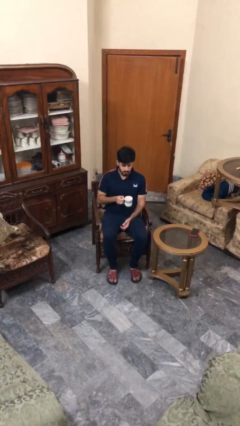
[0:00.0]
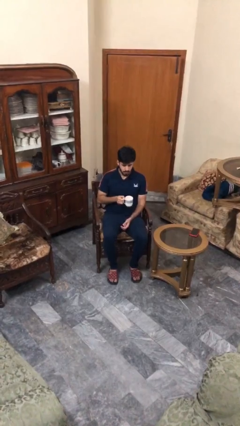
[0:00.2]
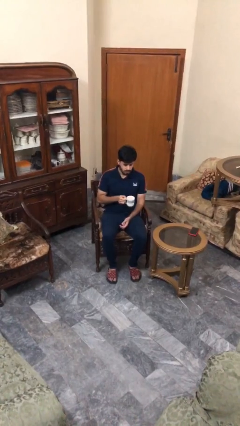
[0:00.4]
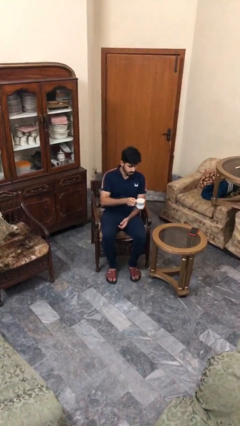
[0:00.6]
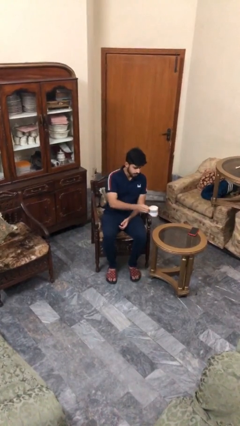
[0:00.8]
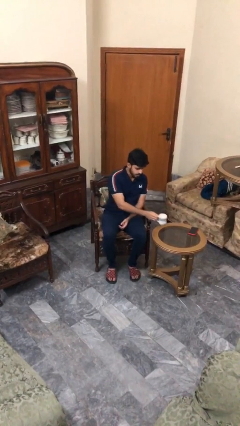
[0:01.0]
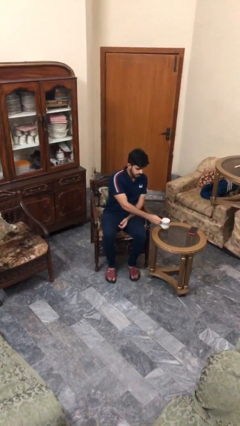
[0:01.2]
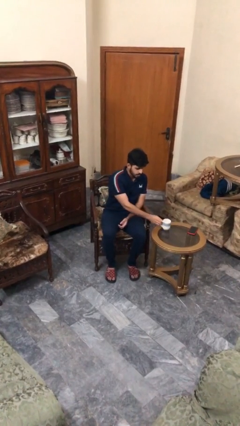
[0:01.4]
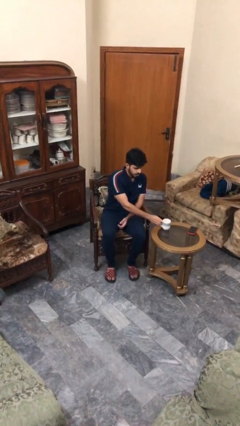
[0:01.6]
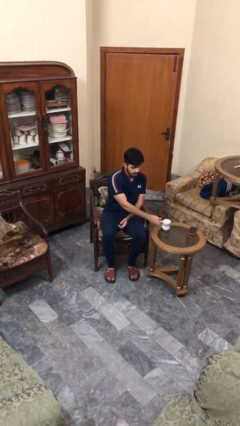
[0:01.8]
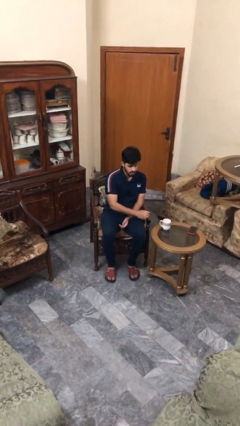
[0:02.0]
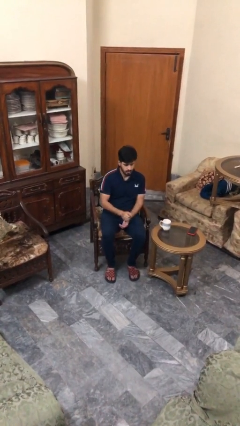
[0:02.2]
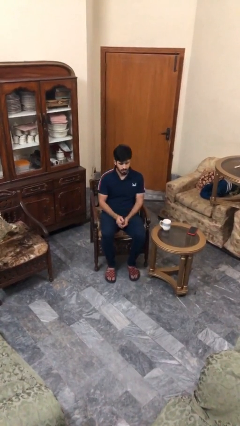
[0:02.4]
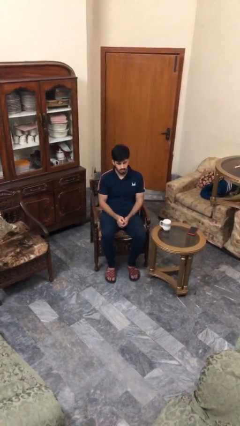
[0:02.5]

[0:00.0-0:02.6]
person puts down object on table

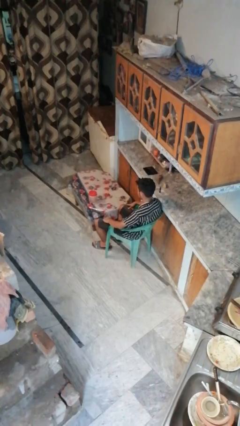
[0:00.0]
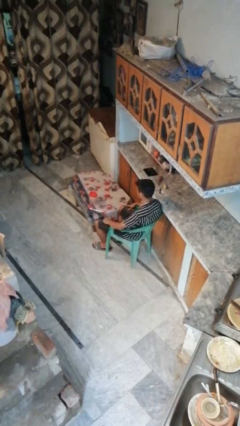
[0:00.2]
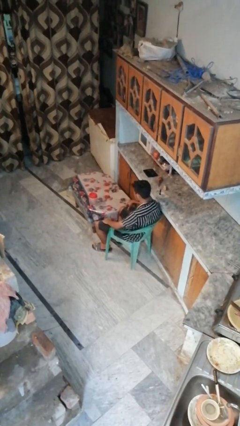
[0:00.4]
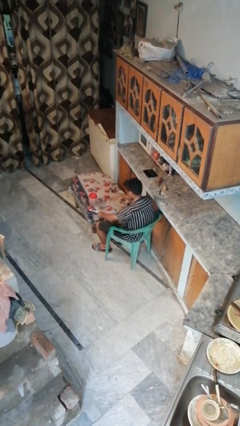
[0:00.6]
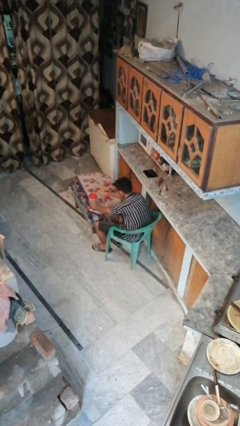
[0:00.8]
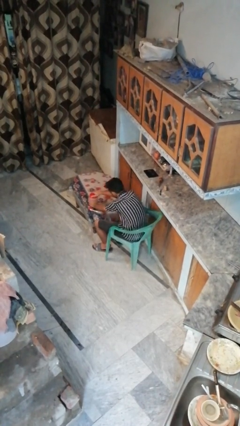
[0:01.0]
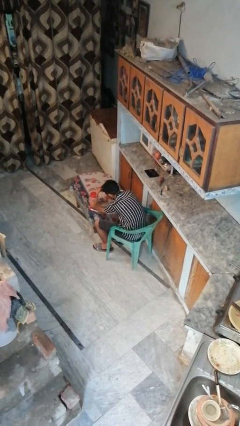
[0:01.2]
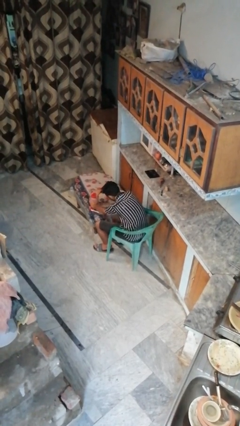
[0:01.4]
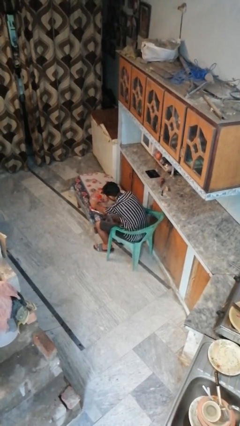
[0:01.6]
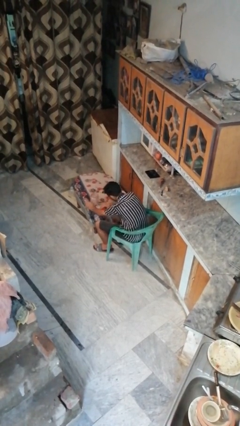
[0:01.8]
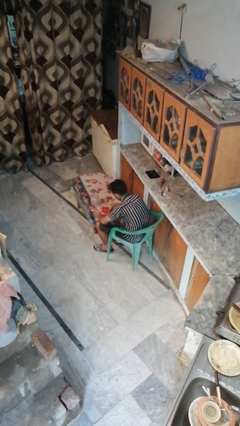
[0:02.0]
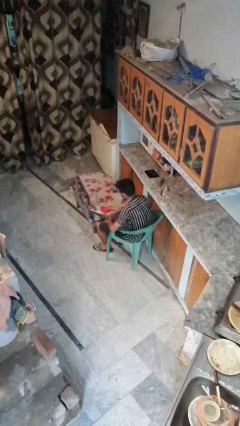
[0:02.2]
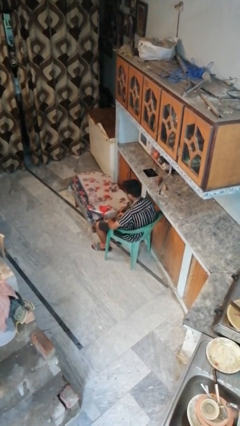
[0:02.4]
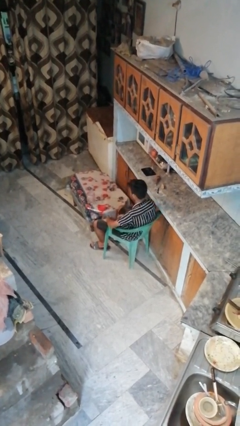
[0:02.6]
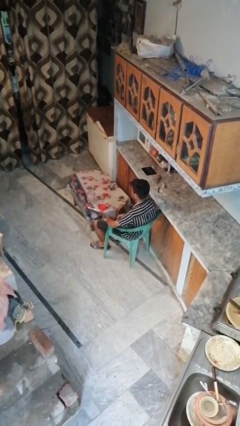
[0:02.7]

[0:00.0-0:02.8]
person opens jar

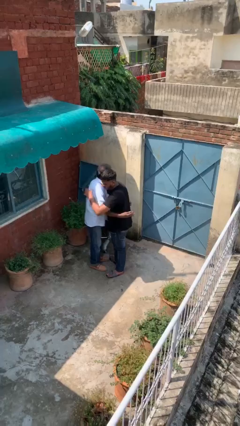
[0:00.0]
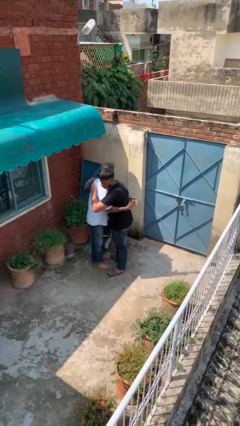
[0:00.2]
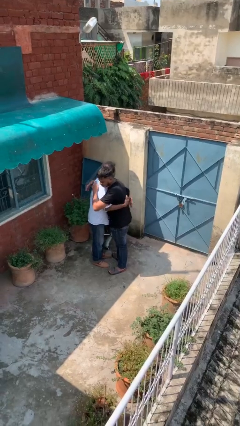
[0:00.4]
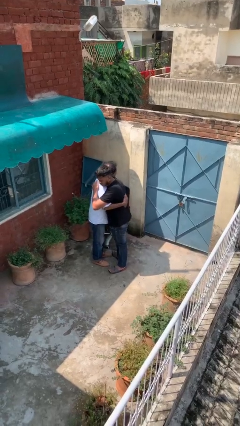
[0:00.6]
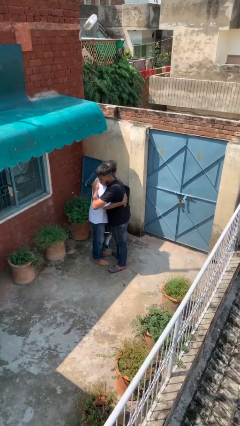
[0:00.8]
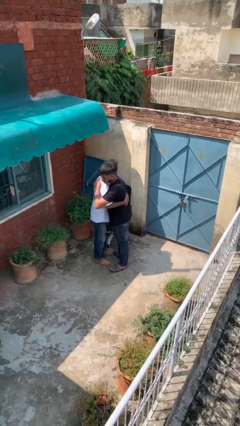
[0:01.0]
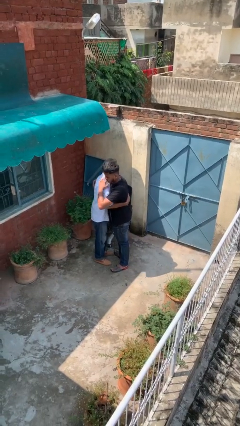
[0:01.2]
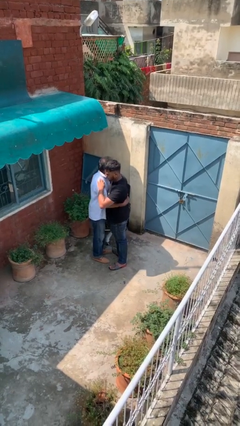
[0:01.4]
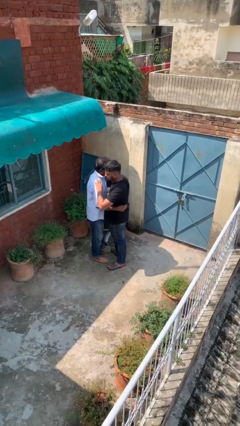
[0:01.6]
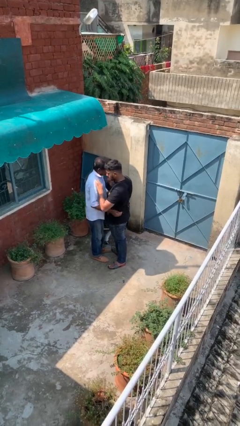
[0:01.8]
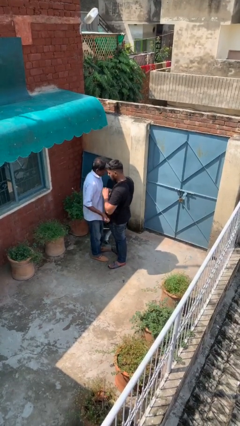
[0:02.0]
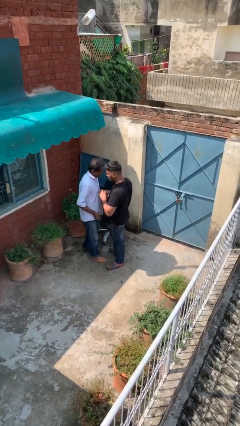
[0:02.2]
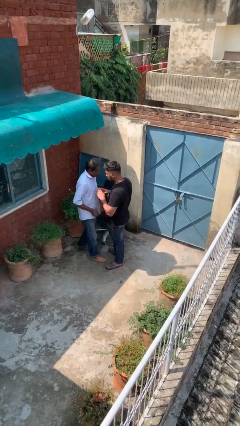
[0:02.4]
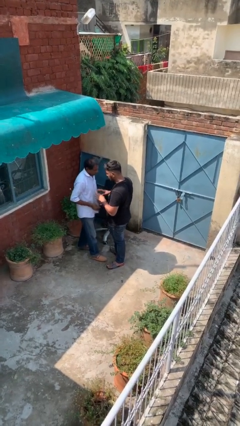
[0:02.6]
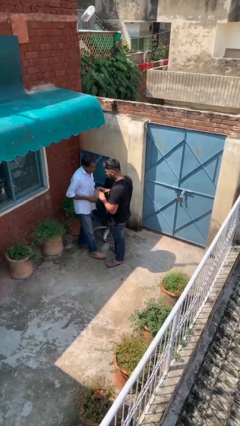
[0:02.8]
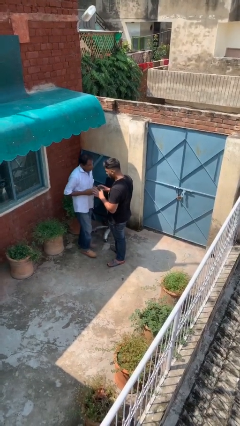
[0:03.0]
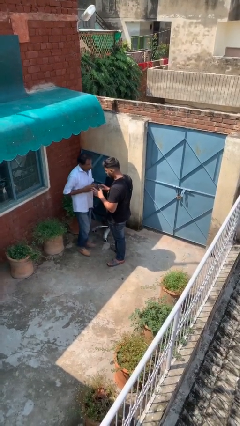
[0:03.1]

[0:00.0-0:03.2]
person embraces person

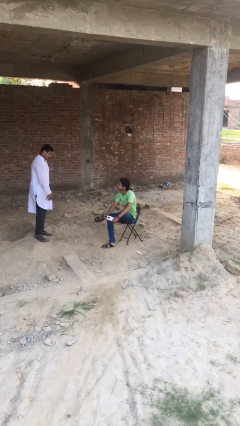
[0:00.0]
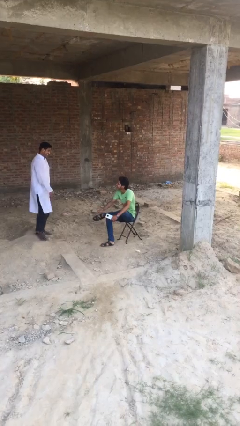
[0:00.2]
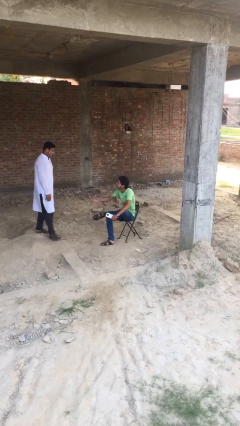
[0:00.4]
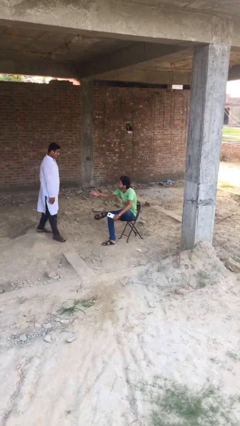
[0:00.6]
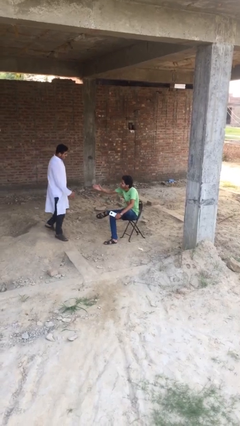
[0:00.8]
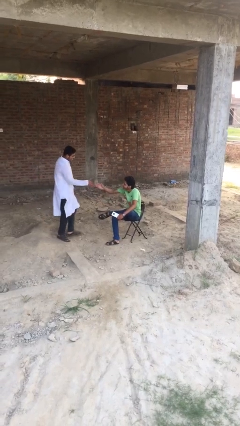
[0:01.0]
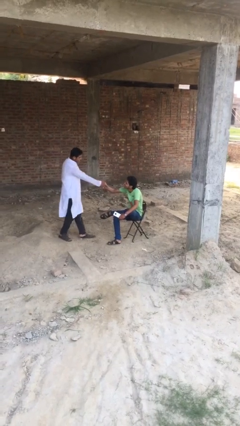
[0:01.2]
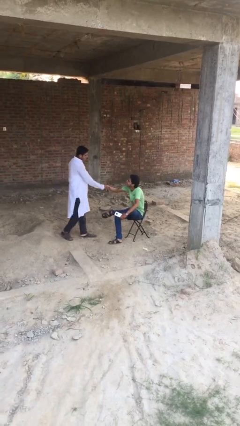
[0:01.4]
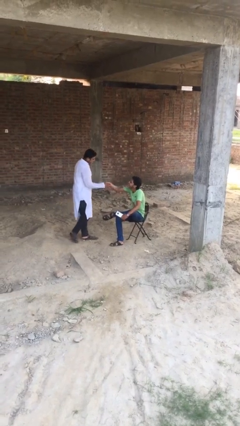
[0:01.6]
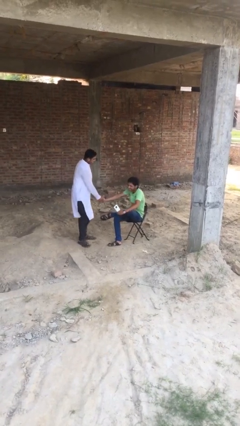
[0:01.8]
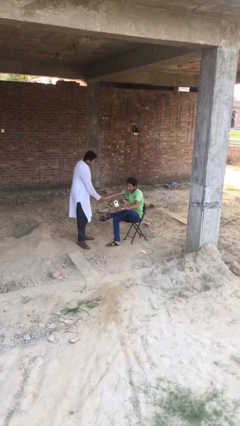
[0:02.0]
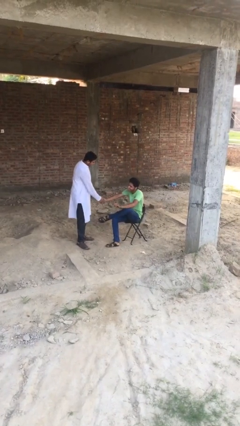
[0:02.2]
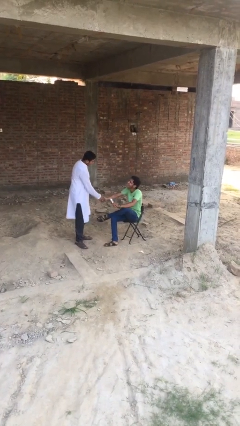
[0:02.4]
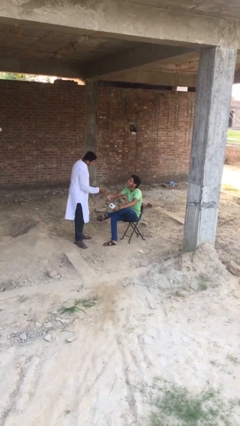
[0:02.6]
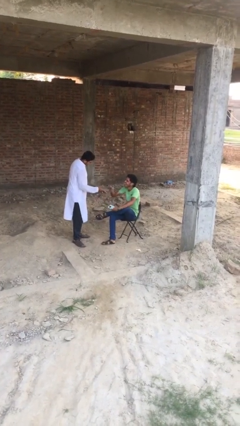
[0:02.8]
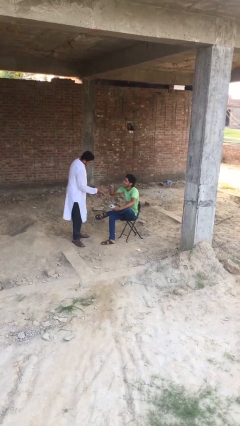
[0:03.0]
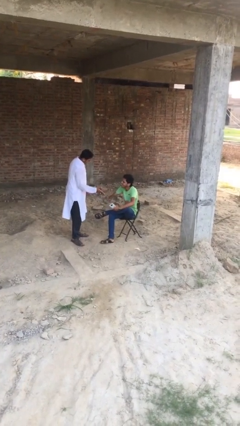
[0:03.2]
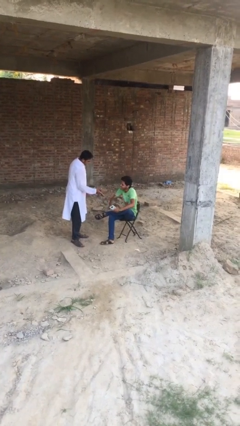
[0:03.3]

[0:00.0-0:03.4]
person shakes hand

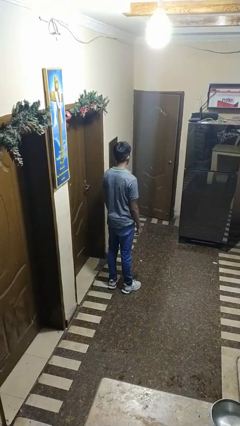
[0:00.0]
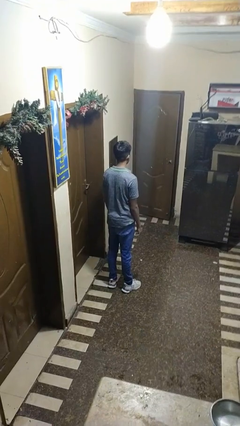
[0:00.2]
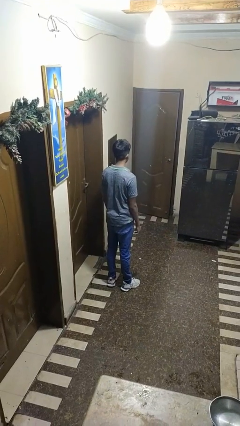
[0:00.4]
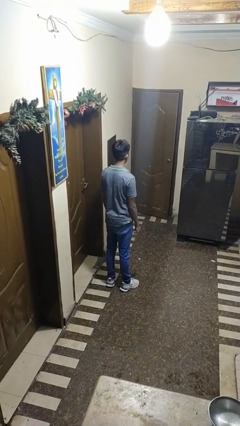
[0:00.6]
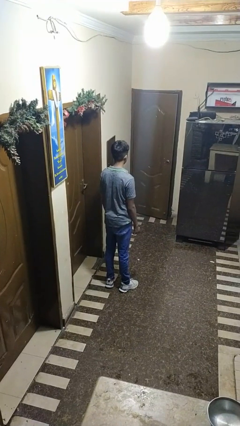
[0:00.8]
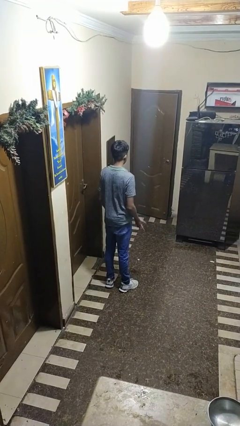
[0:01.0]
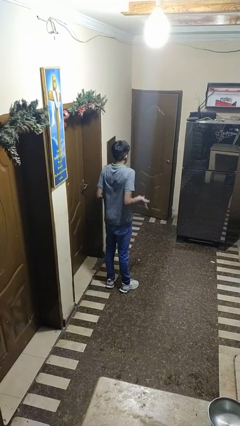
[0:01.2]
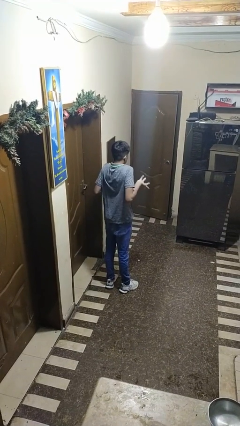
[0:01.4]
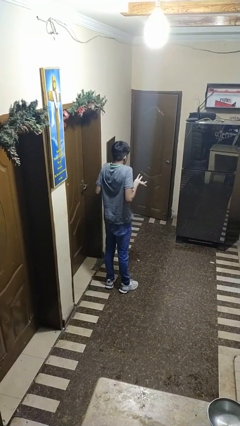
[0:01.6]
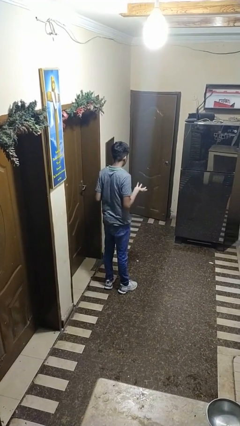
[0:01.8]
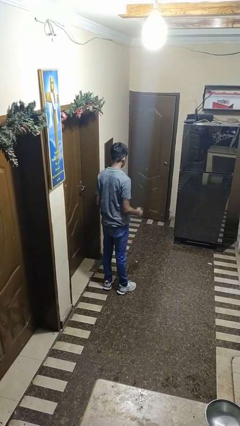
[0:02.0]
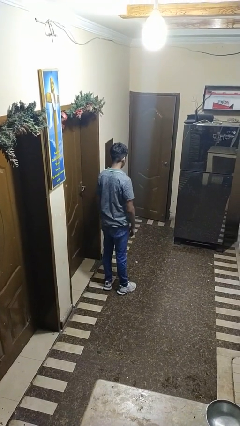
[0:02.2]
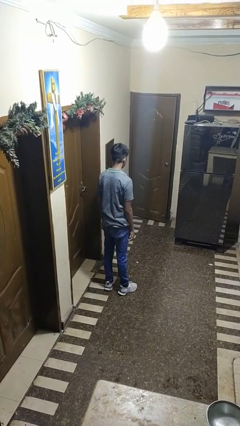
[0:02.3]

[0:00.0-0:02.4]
person shrugs

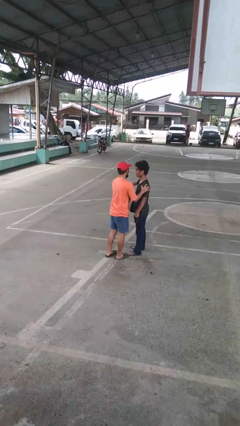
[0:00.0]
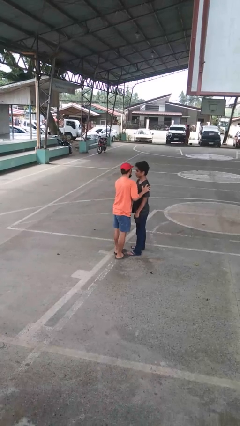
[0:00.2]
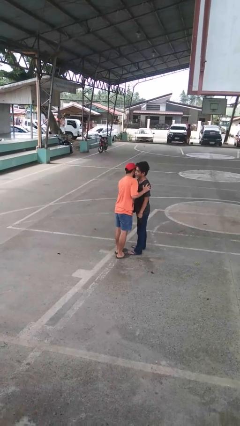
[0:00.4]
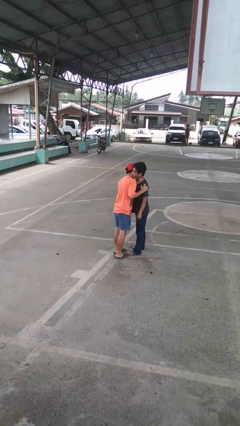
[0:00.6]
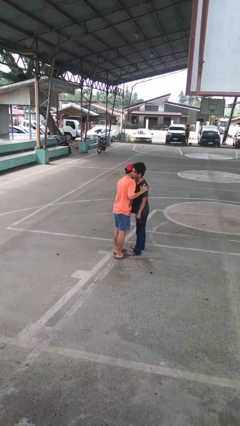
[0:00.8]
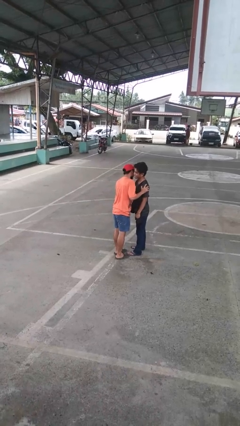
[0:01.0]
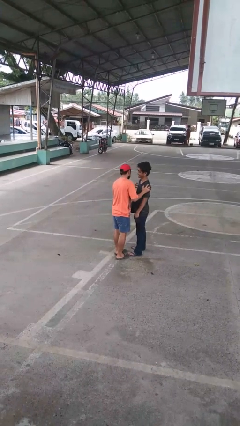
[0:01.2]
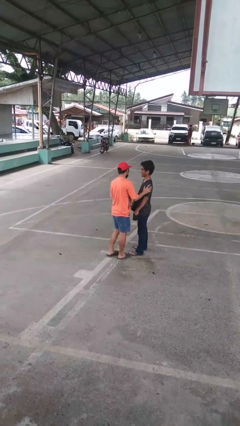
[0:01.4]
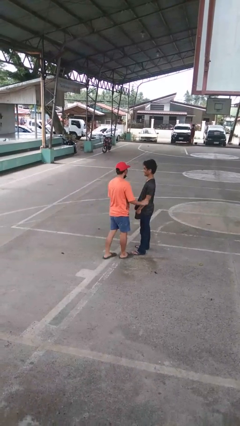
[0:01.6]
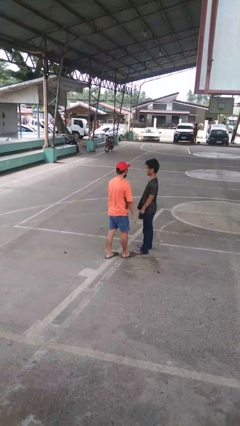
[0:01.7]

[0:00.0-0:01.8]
person kisses cheek of person

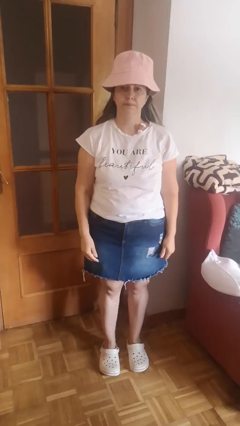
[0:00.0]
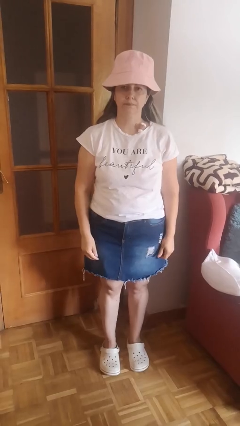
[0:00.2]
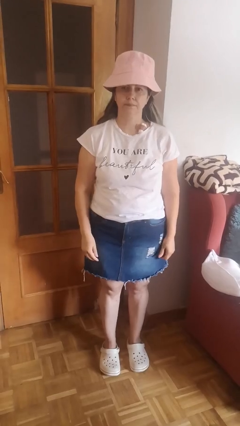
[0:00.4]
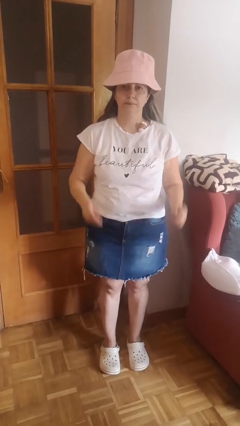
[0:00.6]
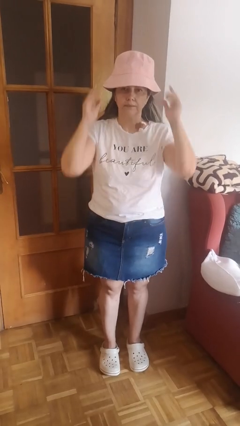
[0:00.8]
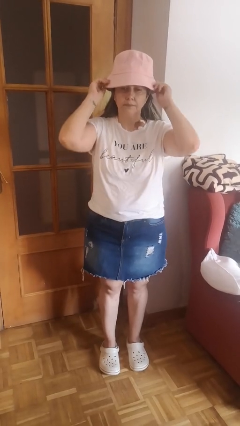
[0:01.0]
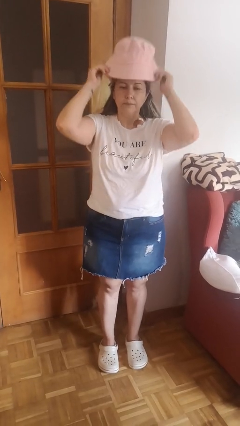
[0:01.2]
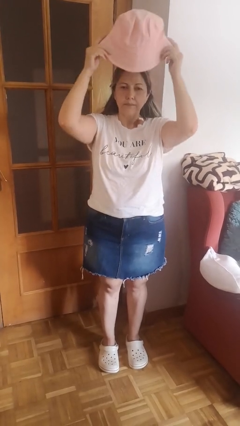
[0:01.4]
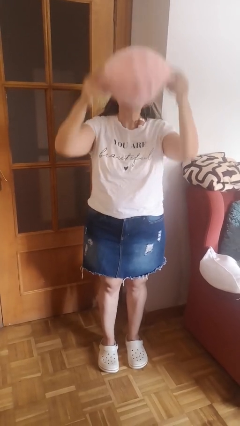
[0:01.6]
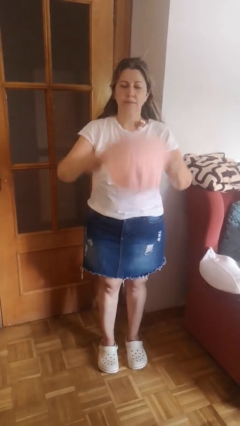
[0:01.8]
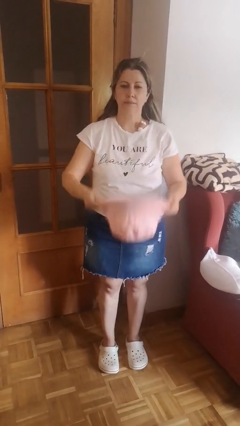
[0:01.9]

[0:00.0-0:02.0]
person takes off hat
